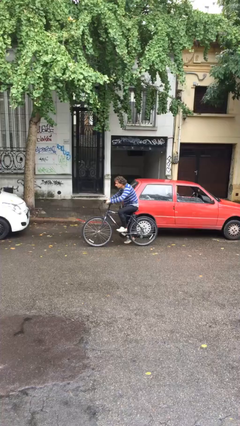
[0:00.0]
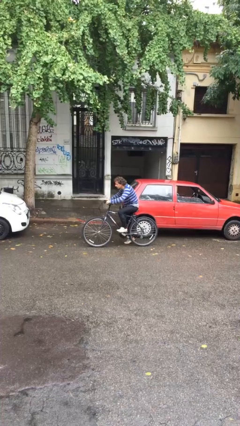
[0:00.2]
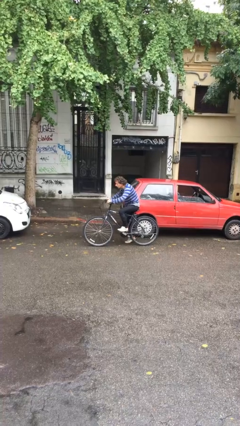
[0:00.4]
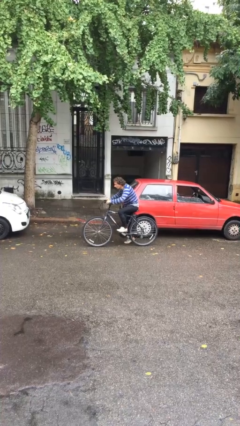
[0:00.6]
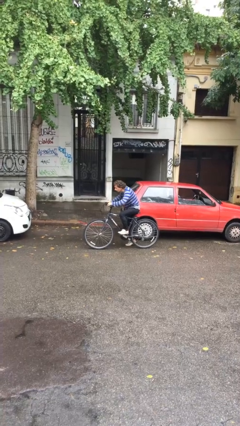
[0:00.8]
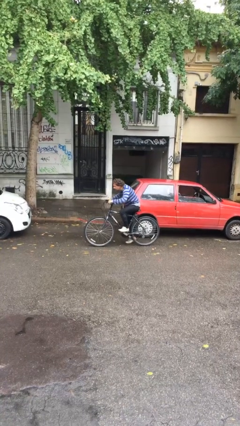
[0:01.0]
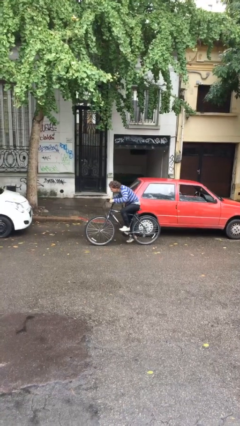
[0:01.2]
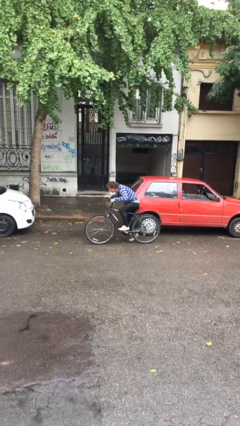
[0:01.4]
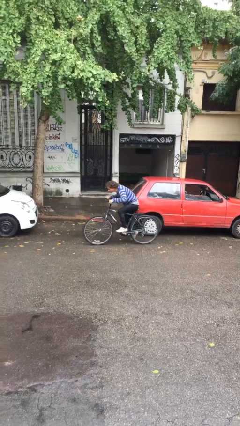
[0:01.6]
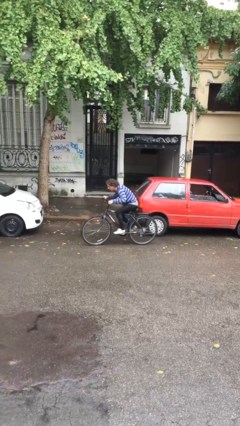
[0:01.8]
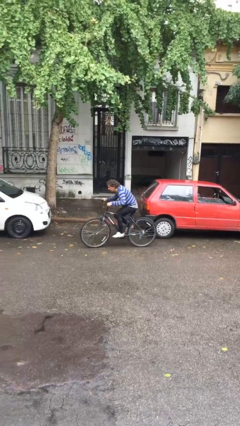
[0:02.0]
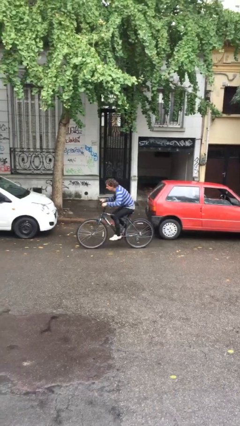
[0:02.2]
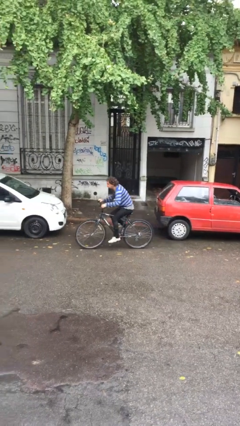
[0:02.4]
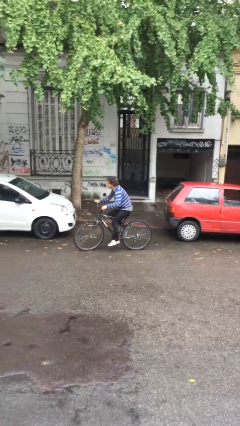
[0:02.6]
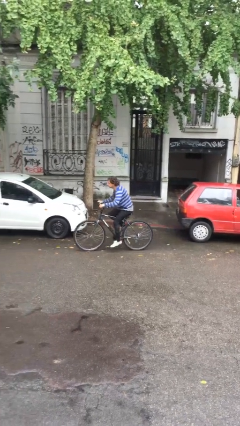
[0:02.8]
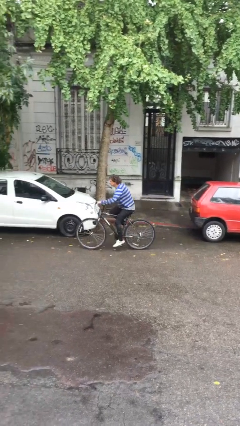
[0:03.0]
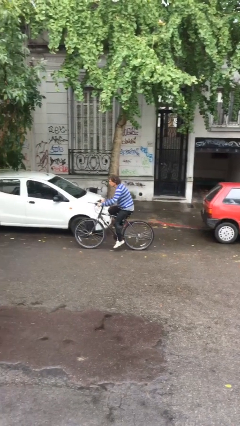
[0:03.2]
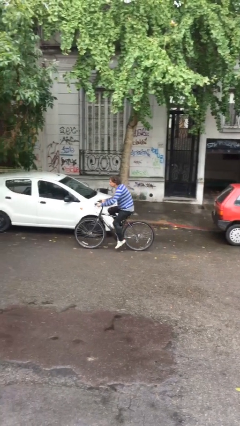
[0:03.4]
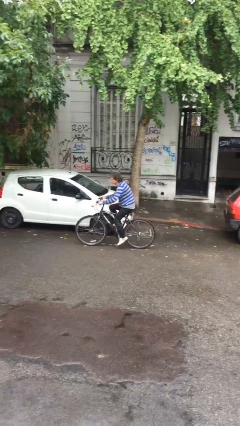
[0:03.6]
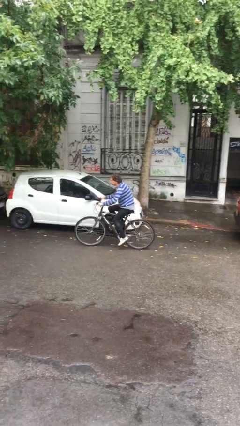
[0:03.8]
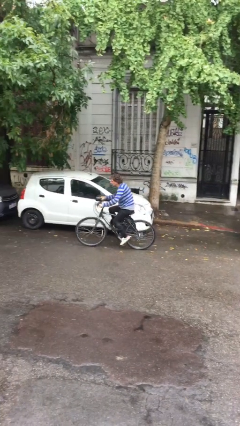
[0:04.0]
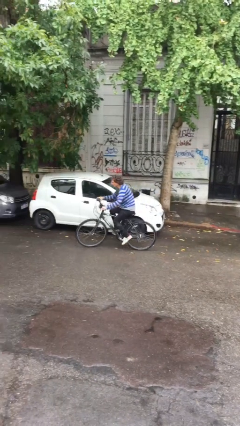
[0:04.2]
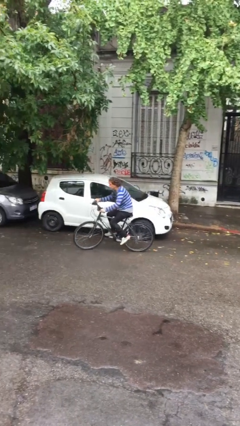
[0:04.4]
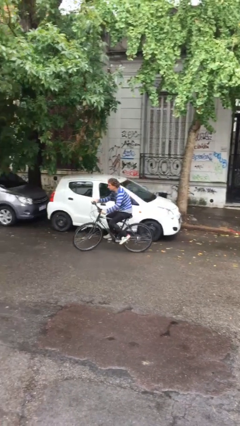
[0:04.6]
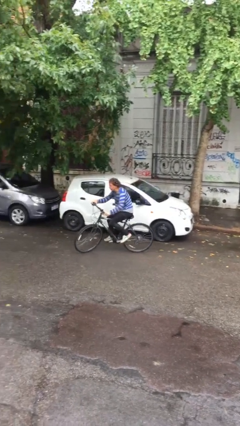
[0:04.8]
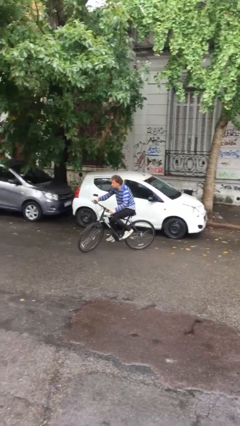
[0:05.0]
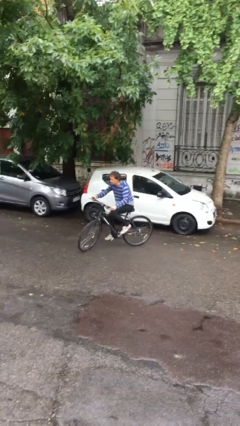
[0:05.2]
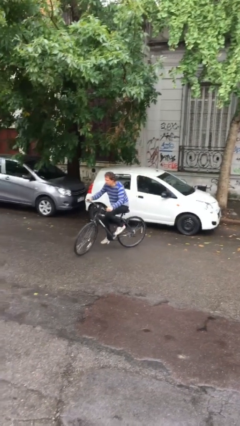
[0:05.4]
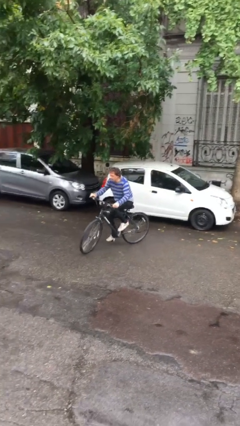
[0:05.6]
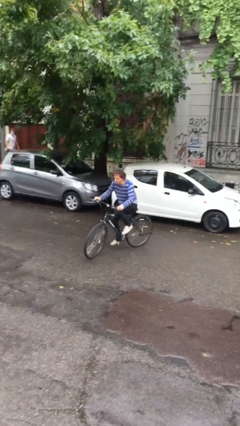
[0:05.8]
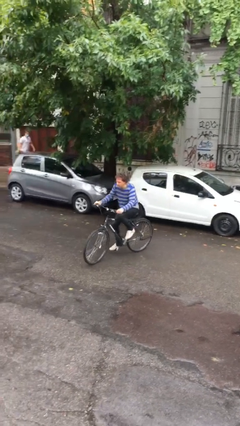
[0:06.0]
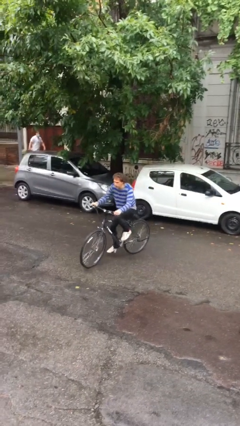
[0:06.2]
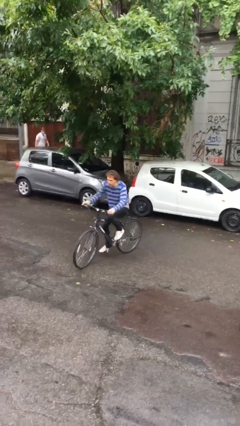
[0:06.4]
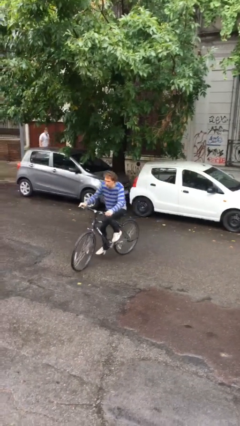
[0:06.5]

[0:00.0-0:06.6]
person rides bicycle

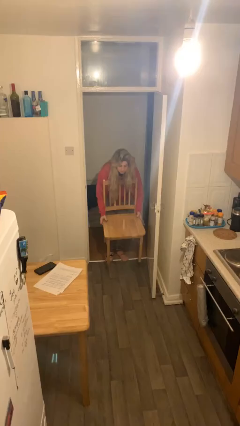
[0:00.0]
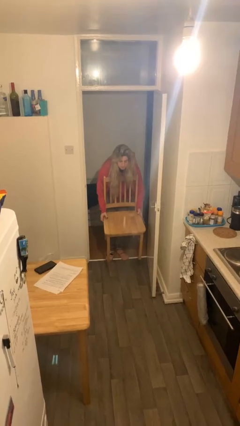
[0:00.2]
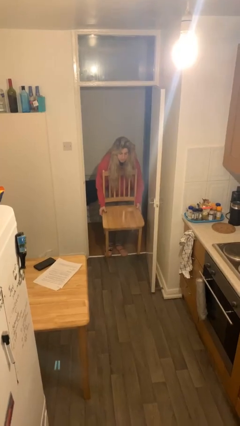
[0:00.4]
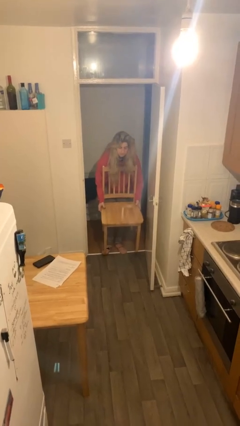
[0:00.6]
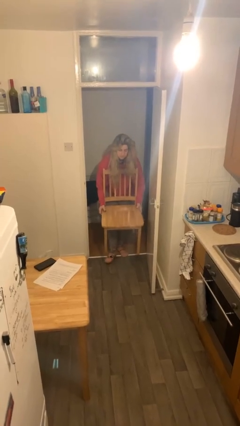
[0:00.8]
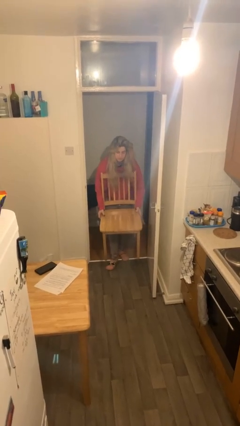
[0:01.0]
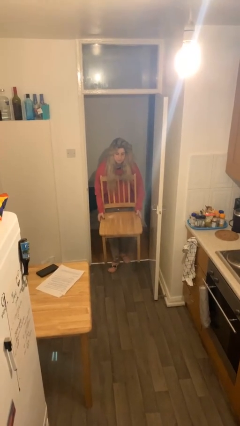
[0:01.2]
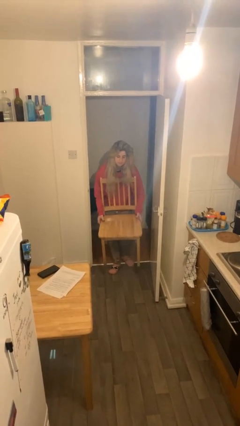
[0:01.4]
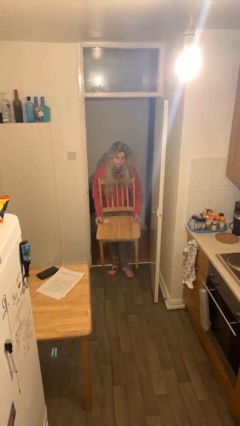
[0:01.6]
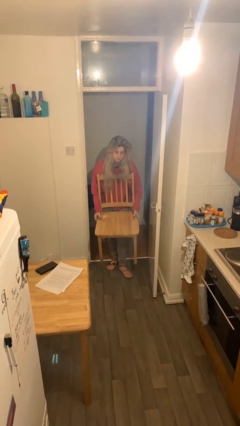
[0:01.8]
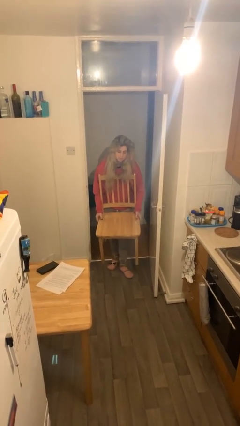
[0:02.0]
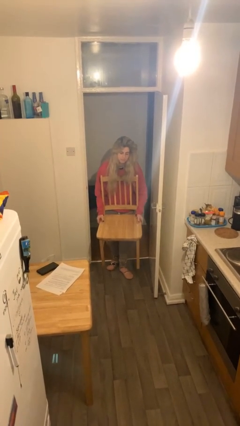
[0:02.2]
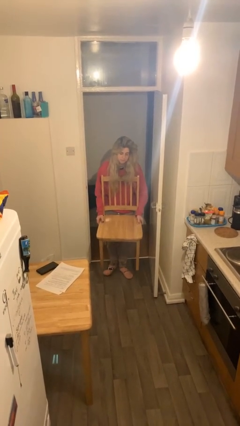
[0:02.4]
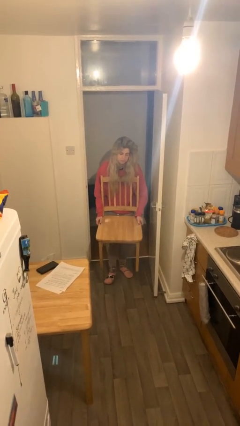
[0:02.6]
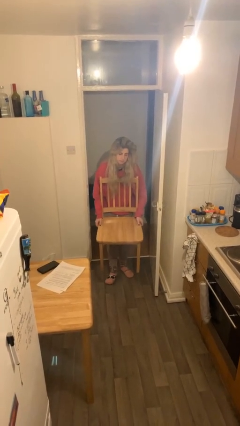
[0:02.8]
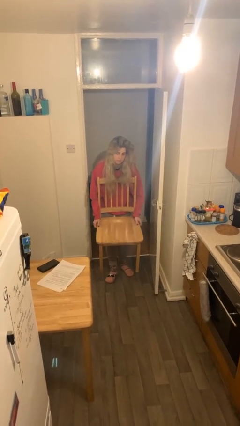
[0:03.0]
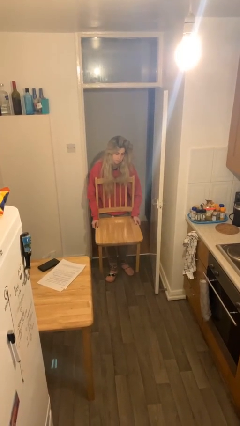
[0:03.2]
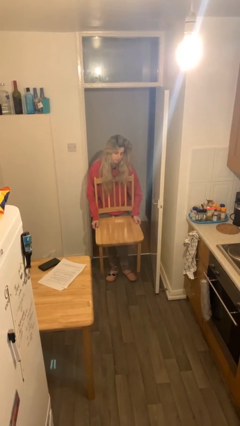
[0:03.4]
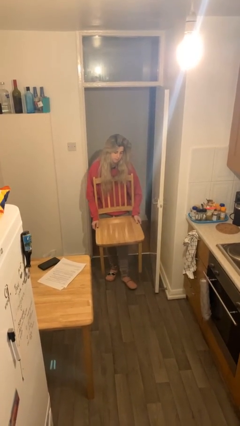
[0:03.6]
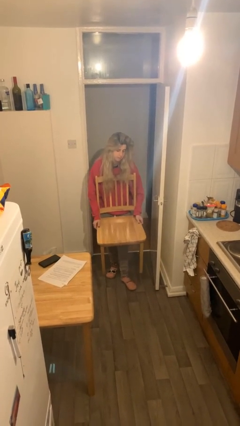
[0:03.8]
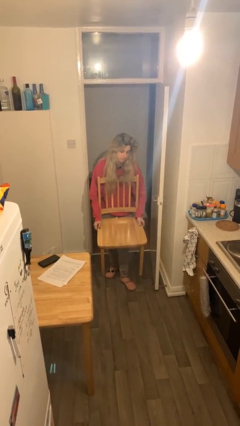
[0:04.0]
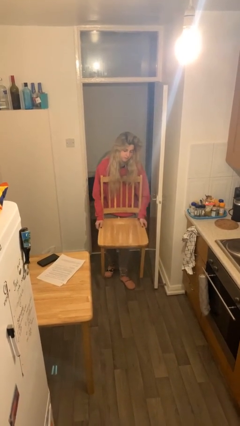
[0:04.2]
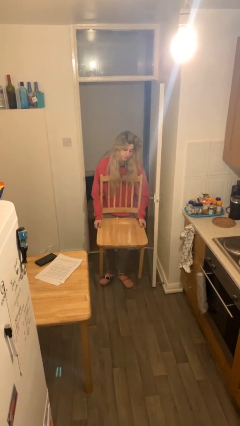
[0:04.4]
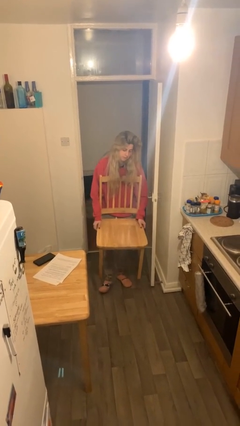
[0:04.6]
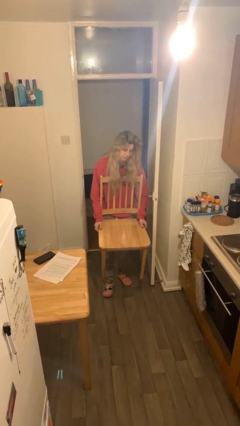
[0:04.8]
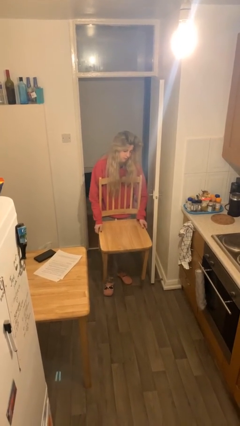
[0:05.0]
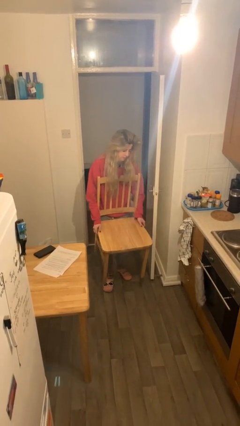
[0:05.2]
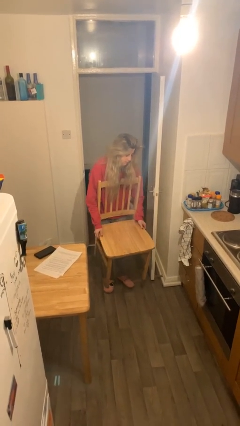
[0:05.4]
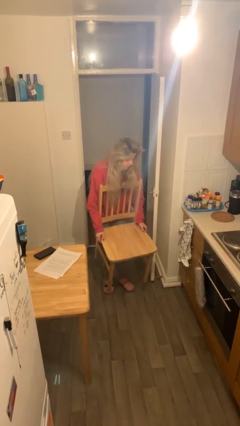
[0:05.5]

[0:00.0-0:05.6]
person carries heavy object

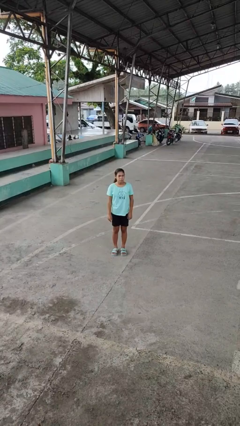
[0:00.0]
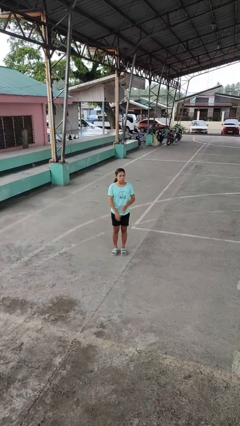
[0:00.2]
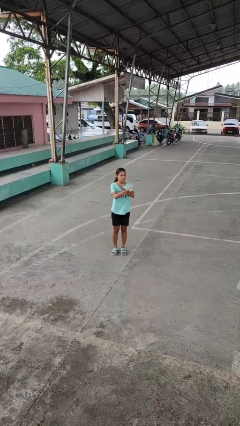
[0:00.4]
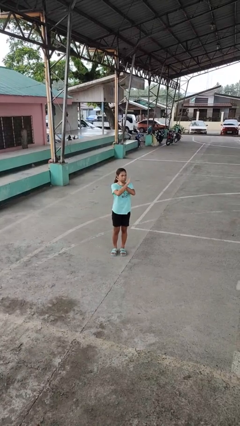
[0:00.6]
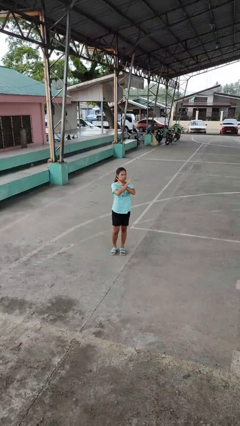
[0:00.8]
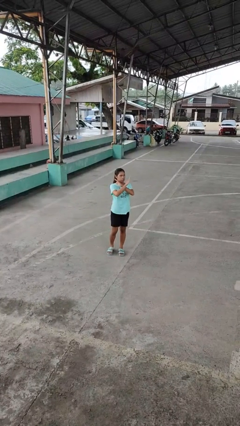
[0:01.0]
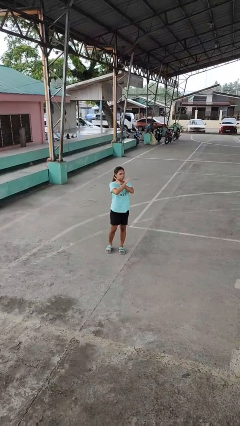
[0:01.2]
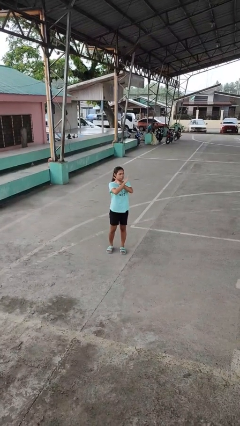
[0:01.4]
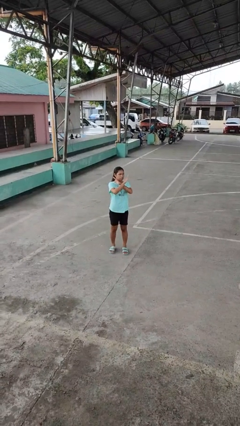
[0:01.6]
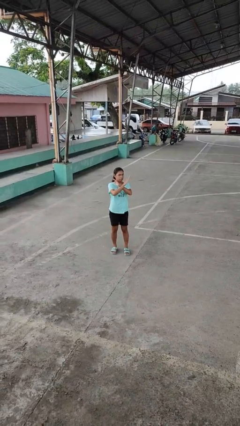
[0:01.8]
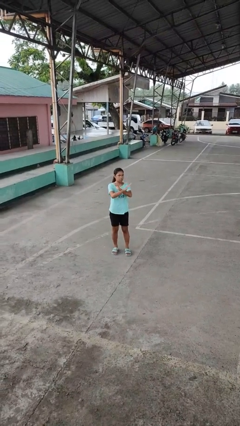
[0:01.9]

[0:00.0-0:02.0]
person gestures arms x

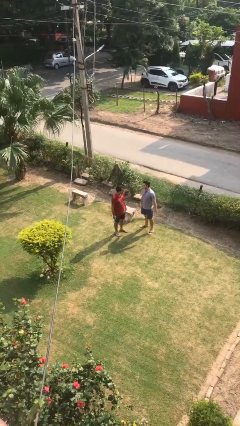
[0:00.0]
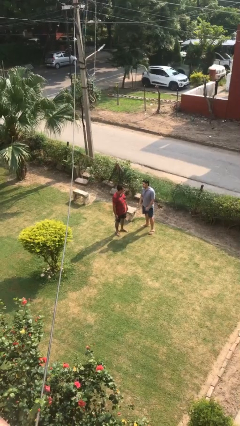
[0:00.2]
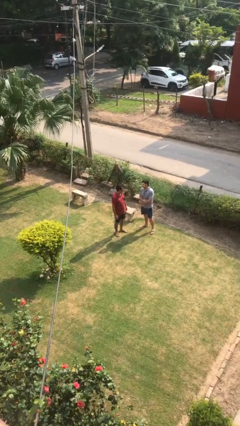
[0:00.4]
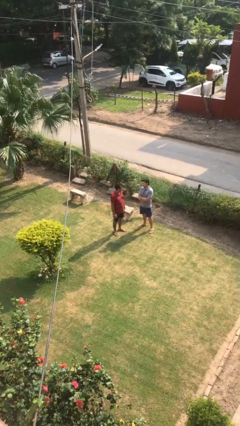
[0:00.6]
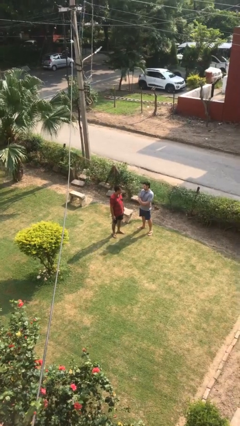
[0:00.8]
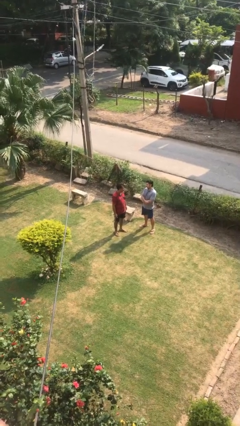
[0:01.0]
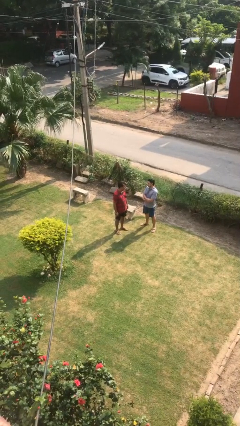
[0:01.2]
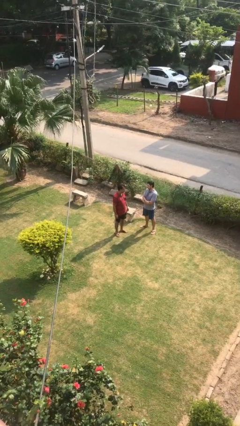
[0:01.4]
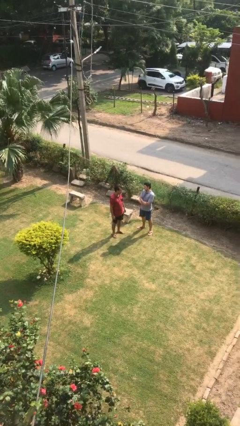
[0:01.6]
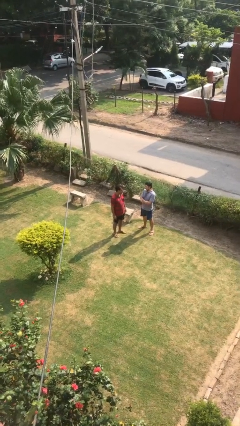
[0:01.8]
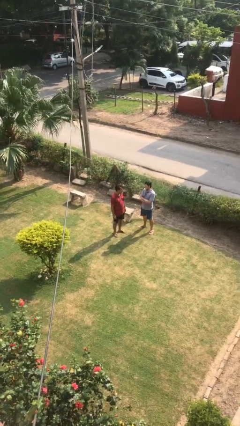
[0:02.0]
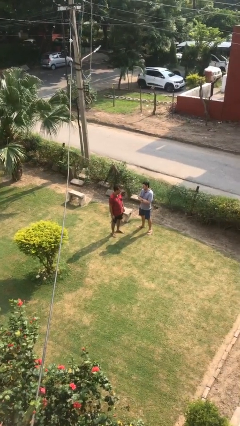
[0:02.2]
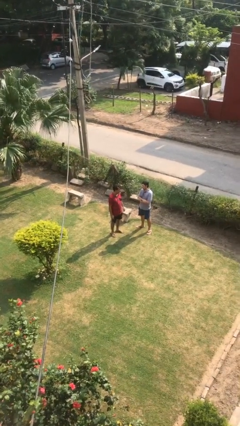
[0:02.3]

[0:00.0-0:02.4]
person talks to person

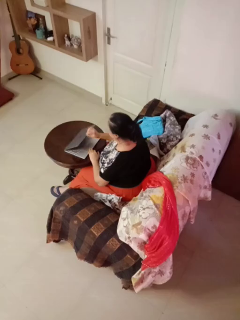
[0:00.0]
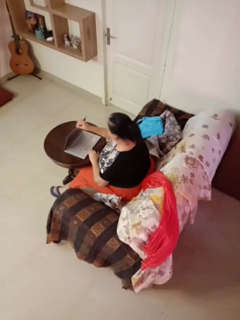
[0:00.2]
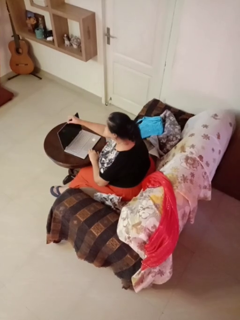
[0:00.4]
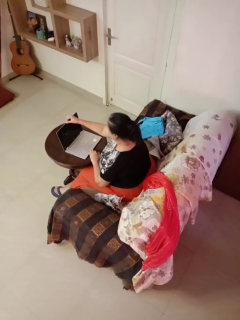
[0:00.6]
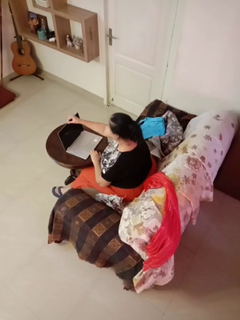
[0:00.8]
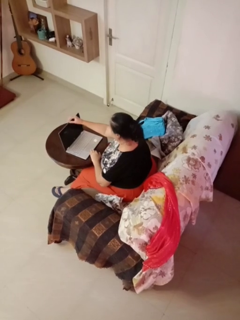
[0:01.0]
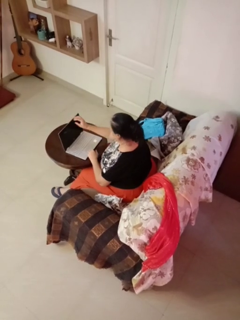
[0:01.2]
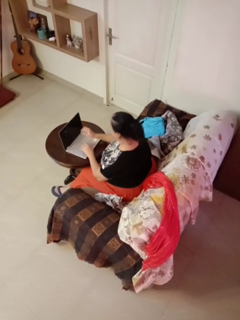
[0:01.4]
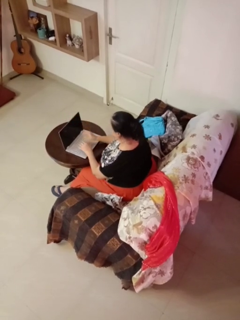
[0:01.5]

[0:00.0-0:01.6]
person opens laptop
